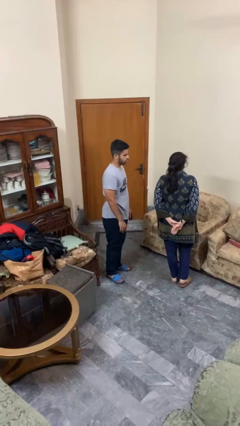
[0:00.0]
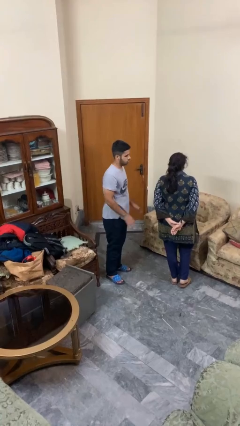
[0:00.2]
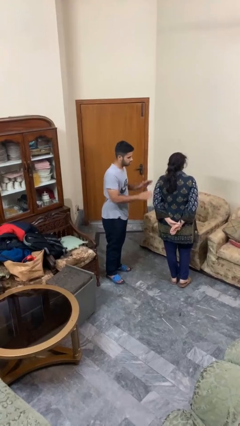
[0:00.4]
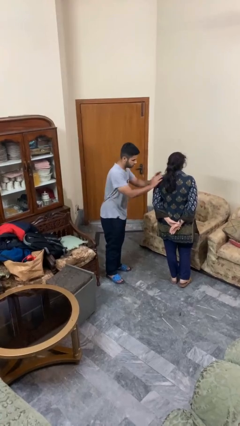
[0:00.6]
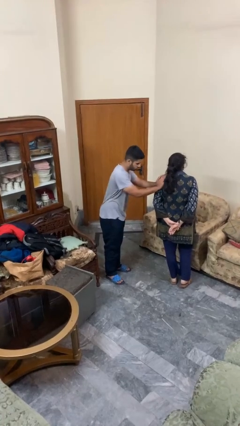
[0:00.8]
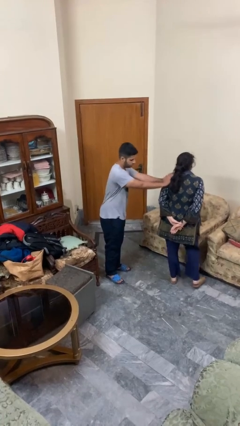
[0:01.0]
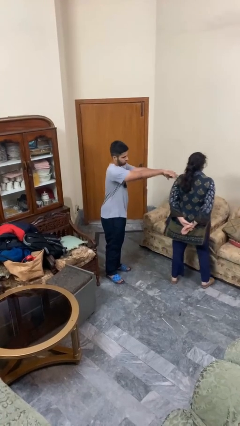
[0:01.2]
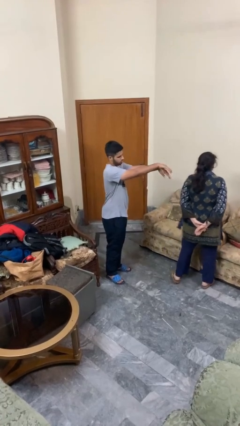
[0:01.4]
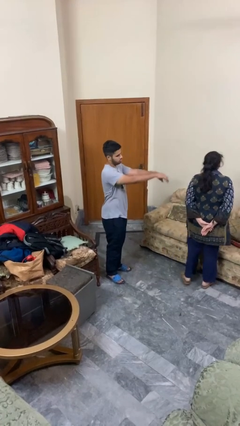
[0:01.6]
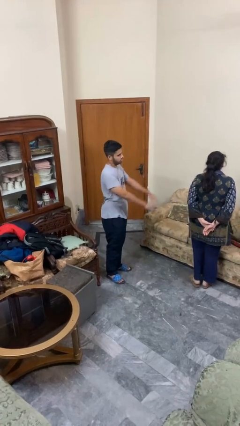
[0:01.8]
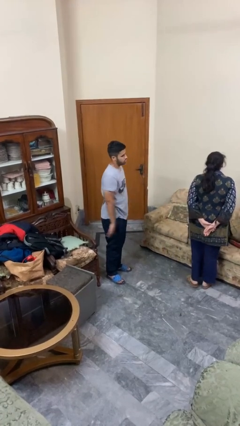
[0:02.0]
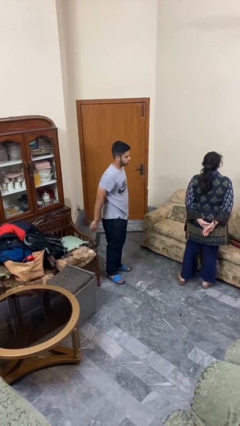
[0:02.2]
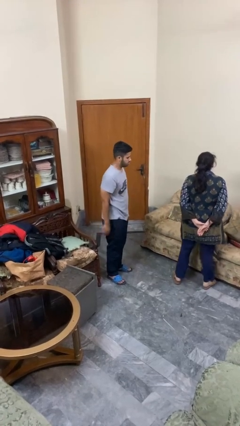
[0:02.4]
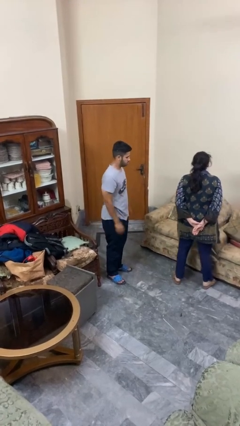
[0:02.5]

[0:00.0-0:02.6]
person shoves person

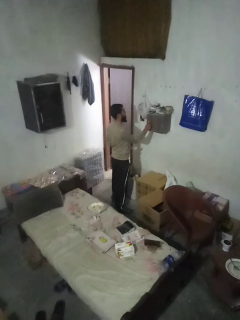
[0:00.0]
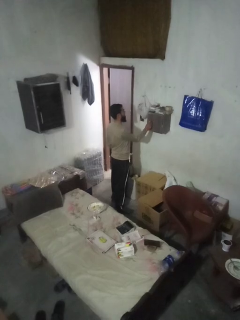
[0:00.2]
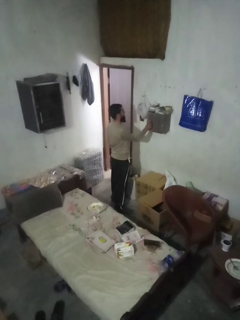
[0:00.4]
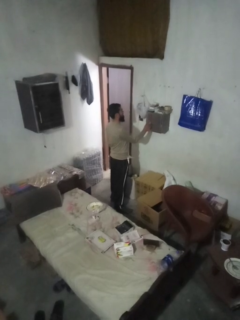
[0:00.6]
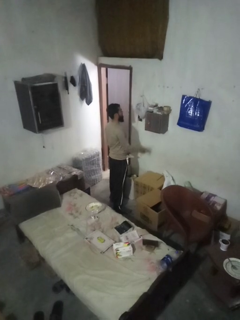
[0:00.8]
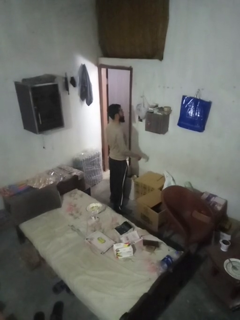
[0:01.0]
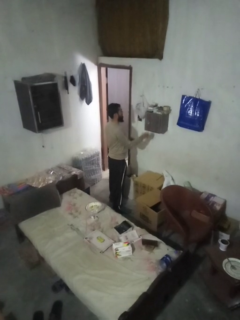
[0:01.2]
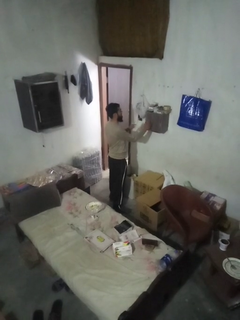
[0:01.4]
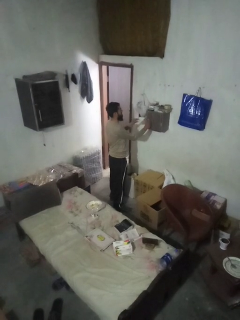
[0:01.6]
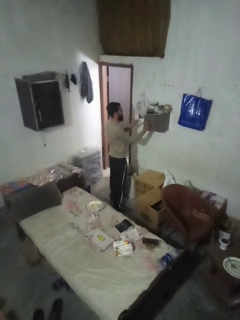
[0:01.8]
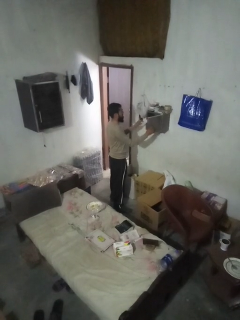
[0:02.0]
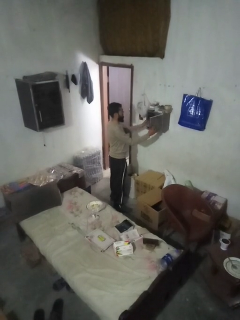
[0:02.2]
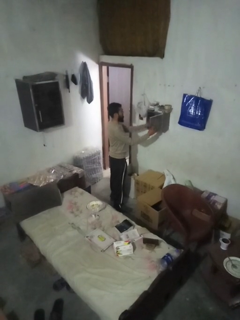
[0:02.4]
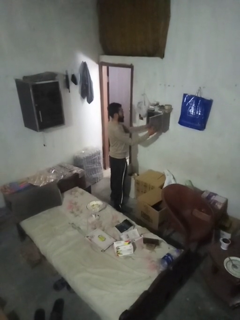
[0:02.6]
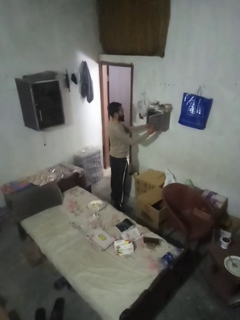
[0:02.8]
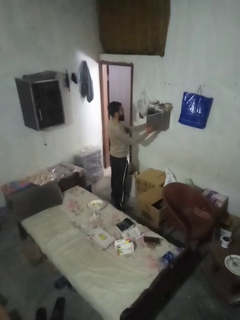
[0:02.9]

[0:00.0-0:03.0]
person puts letters in mailbox

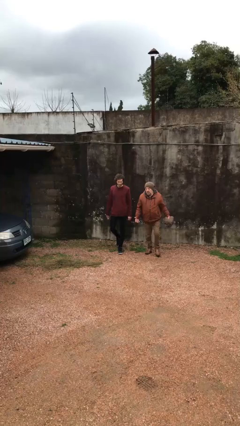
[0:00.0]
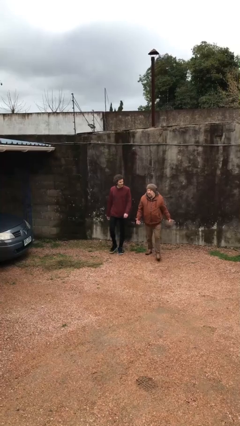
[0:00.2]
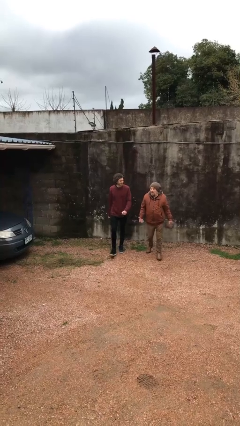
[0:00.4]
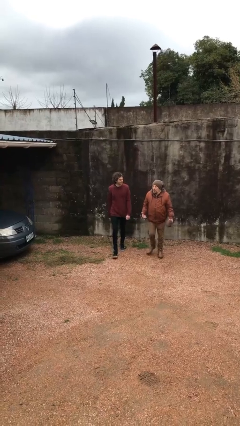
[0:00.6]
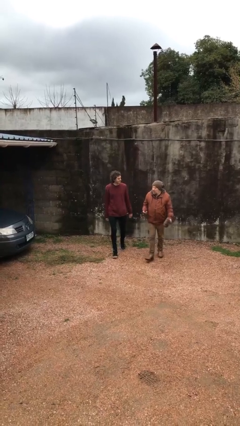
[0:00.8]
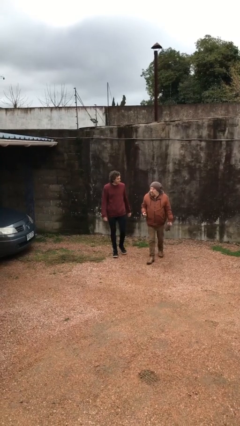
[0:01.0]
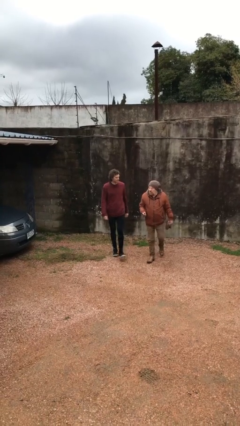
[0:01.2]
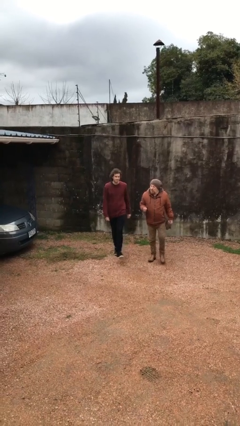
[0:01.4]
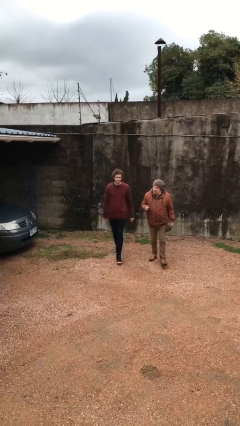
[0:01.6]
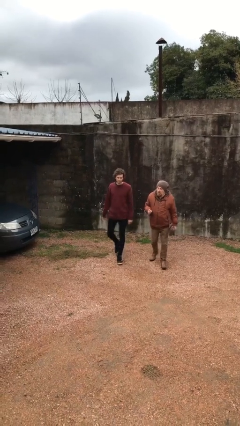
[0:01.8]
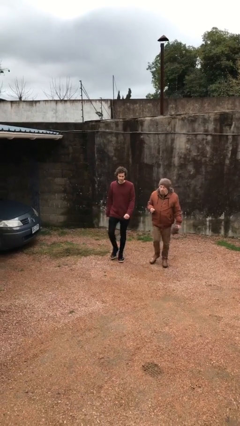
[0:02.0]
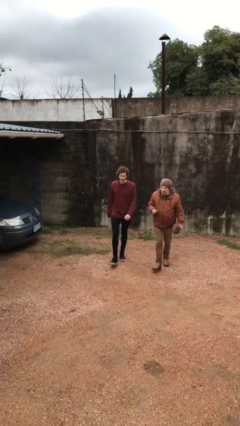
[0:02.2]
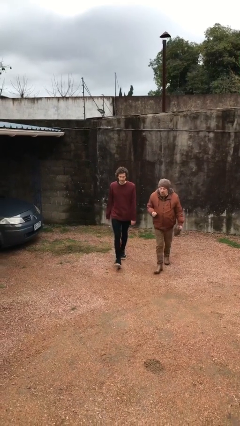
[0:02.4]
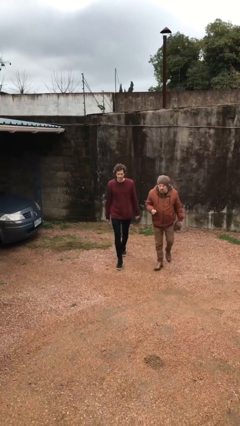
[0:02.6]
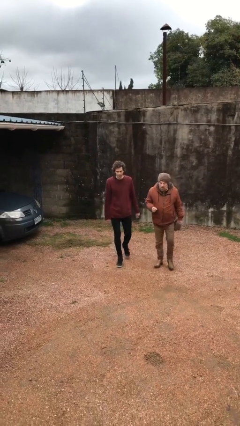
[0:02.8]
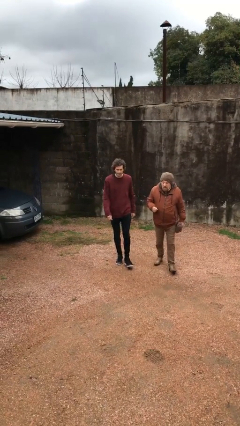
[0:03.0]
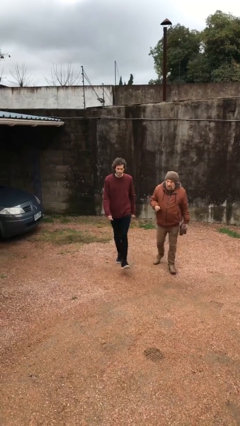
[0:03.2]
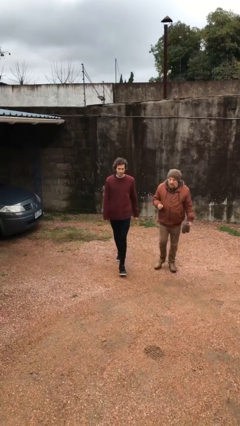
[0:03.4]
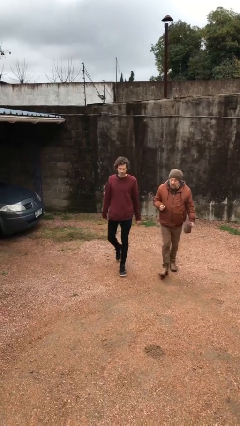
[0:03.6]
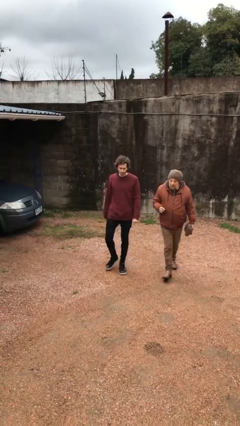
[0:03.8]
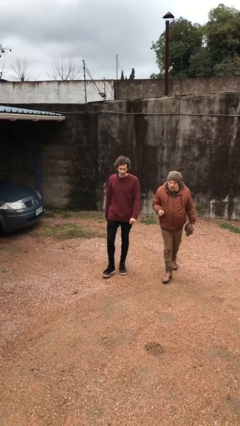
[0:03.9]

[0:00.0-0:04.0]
person talks to person

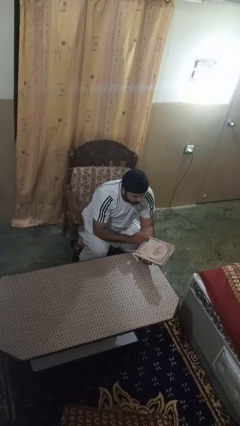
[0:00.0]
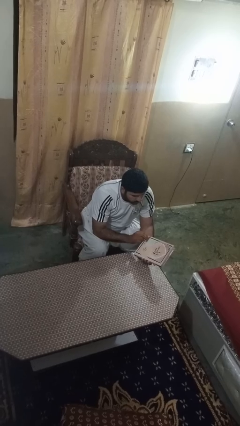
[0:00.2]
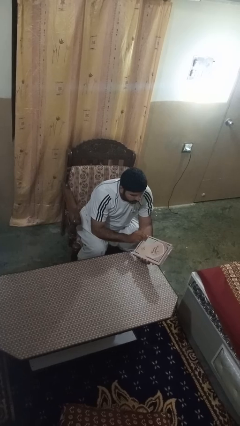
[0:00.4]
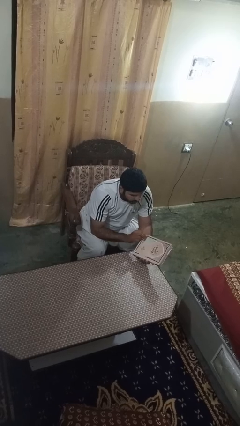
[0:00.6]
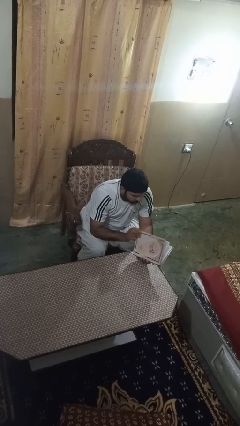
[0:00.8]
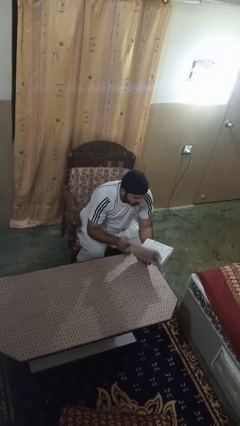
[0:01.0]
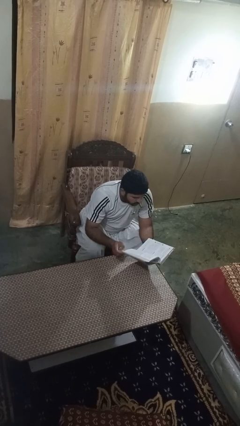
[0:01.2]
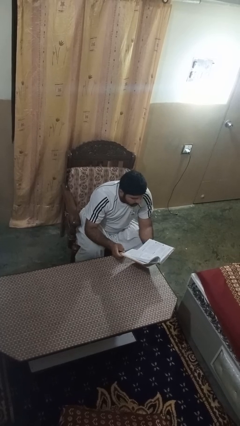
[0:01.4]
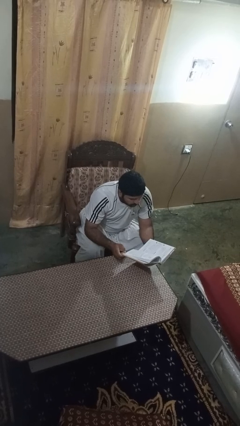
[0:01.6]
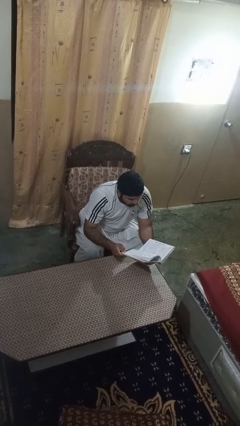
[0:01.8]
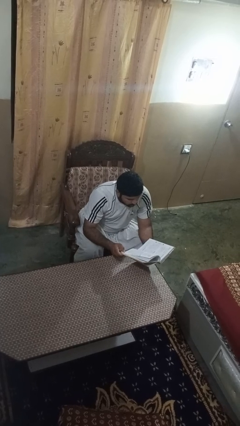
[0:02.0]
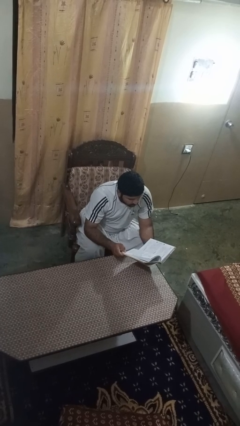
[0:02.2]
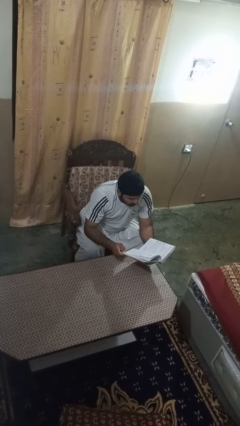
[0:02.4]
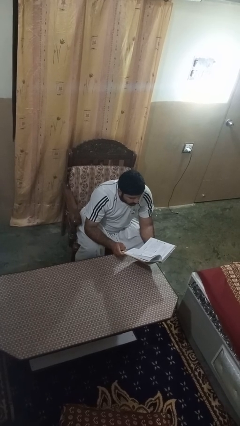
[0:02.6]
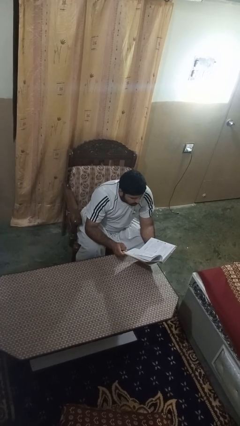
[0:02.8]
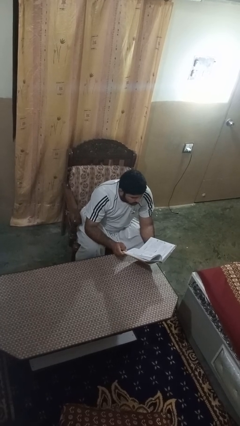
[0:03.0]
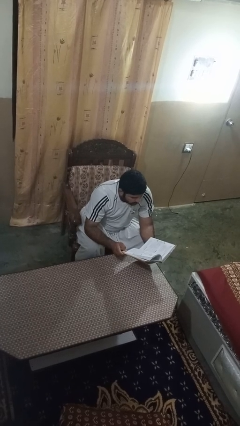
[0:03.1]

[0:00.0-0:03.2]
person reads book

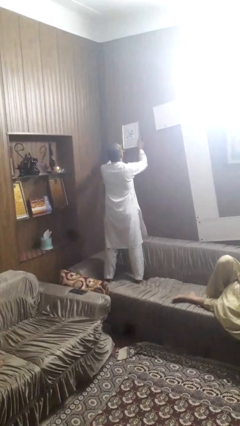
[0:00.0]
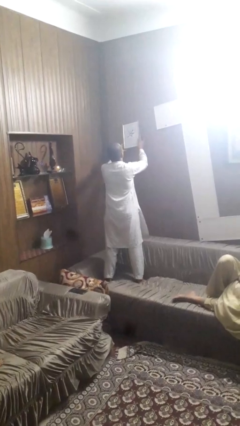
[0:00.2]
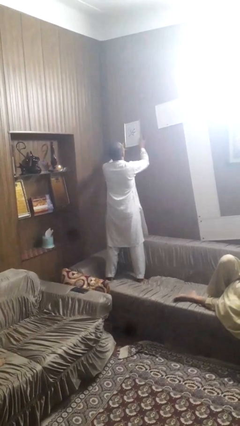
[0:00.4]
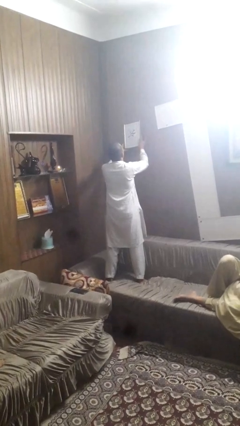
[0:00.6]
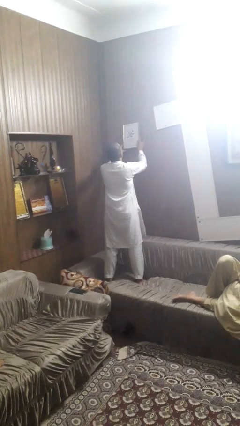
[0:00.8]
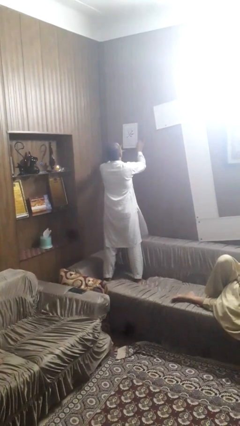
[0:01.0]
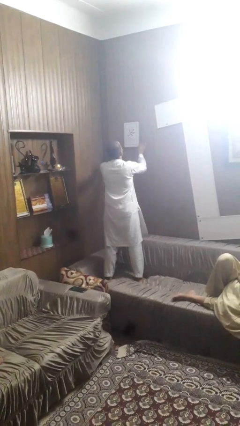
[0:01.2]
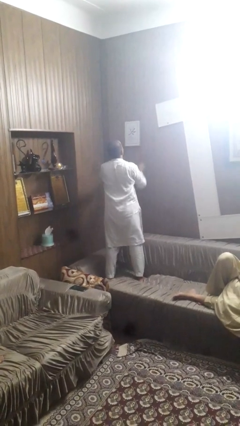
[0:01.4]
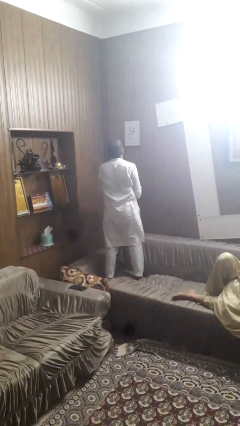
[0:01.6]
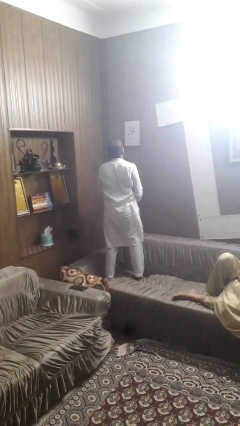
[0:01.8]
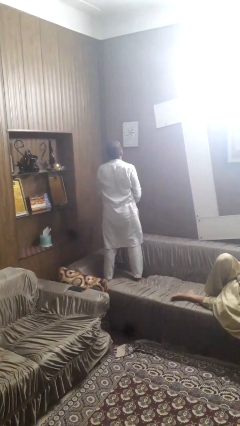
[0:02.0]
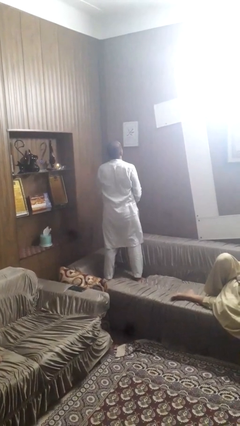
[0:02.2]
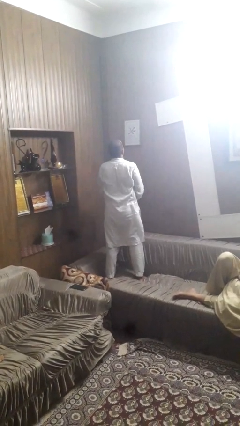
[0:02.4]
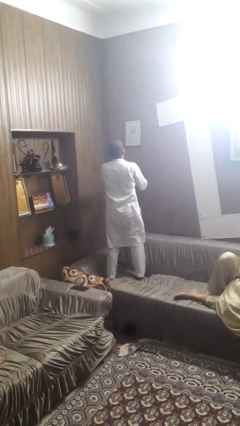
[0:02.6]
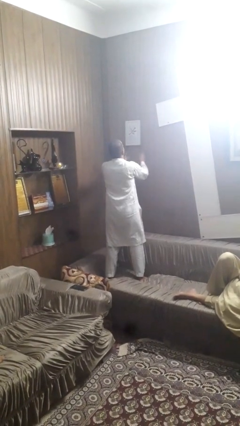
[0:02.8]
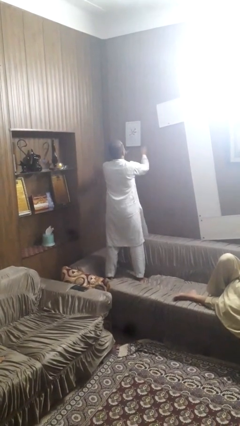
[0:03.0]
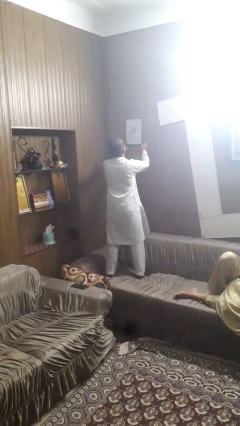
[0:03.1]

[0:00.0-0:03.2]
person puts up picture frame

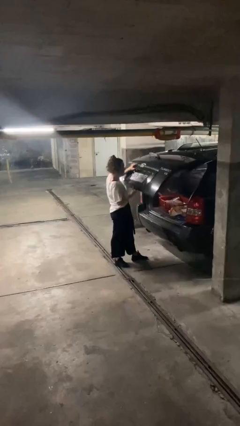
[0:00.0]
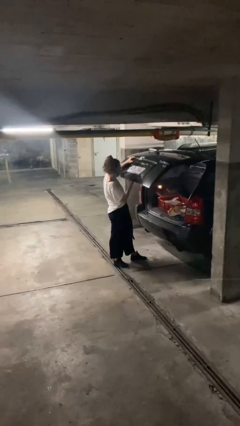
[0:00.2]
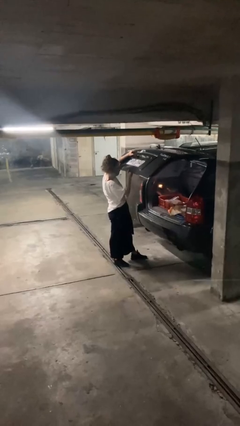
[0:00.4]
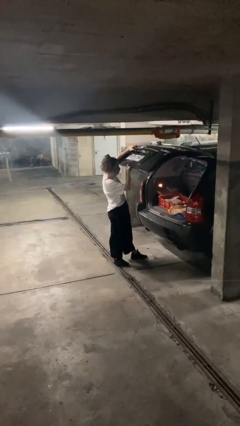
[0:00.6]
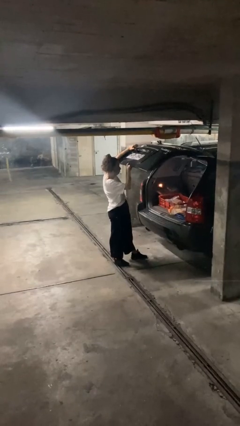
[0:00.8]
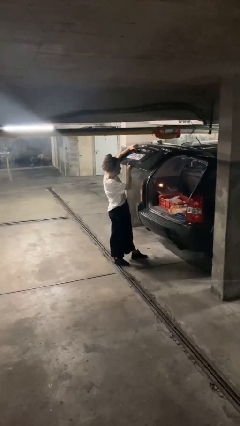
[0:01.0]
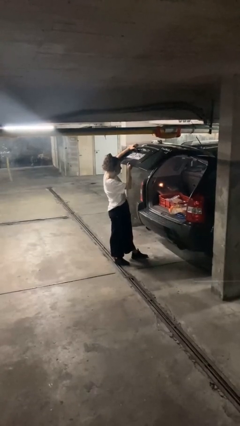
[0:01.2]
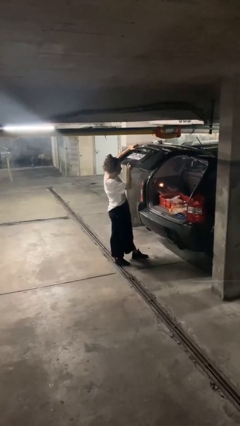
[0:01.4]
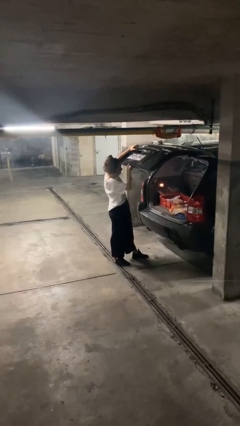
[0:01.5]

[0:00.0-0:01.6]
person opens car trunk

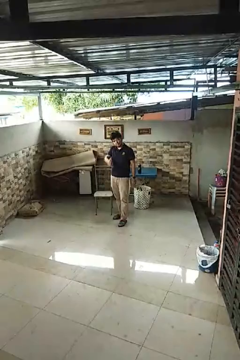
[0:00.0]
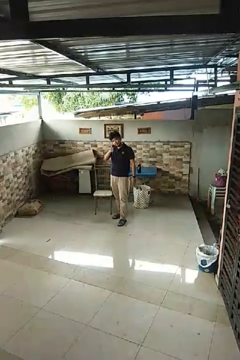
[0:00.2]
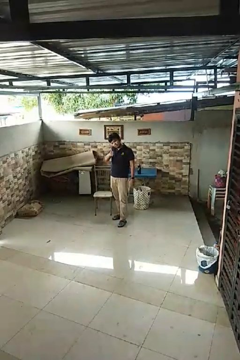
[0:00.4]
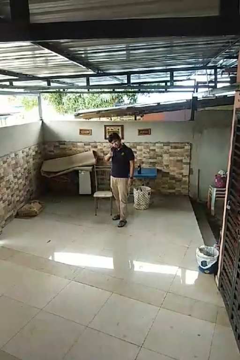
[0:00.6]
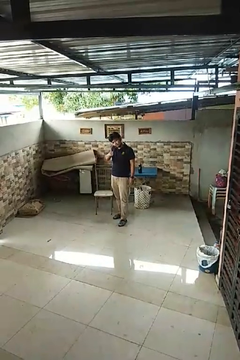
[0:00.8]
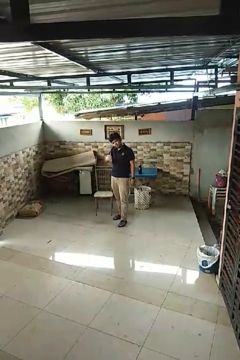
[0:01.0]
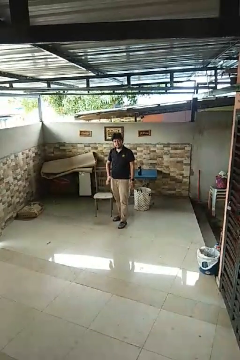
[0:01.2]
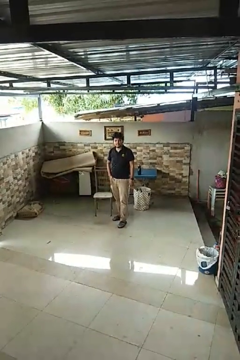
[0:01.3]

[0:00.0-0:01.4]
person gestures thumbs up
